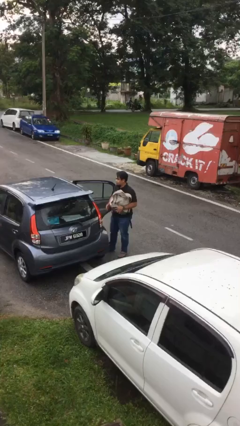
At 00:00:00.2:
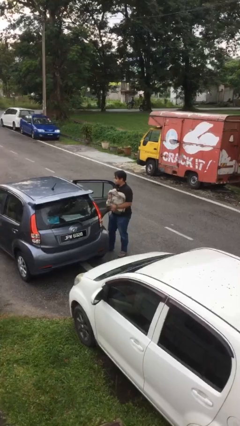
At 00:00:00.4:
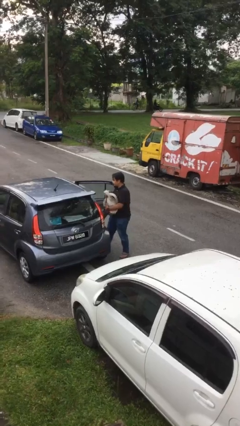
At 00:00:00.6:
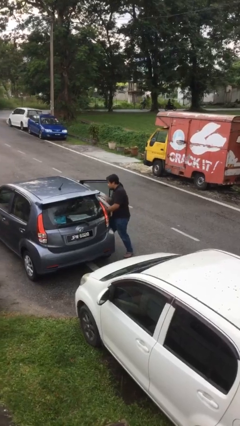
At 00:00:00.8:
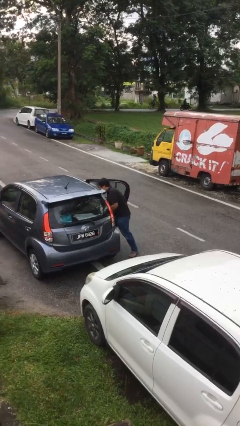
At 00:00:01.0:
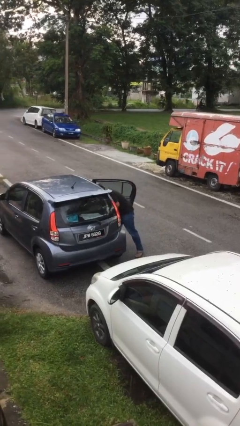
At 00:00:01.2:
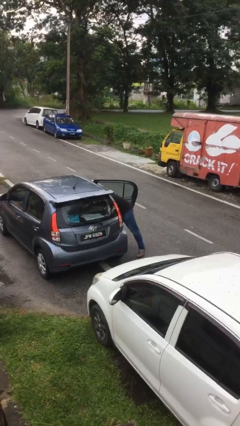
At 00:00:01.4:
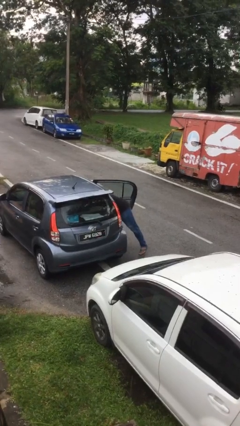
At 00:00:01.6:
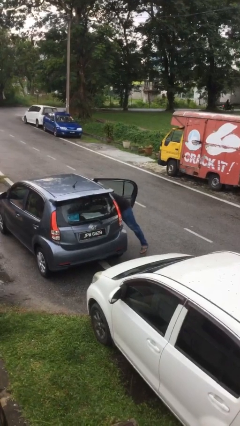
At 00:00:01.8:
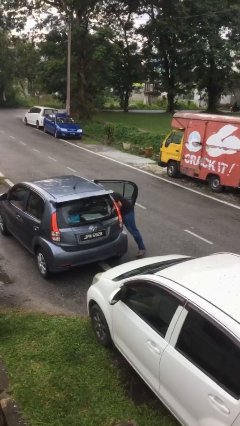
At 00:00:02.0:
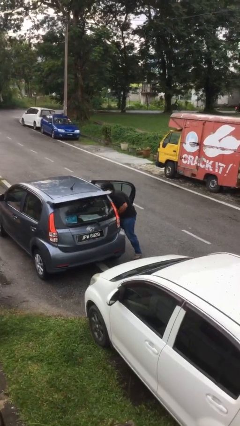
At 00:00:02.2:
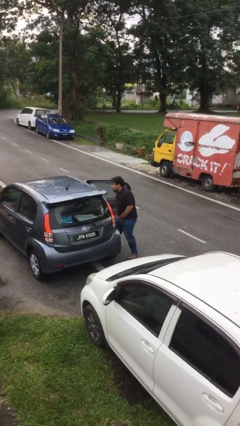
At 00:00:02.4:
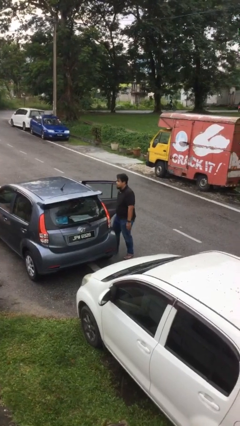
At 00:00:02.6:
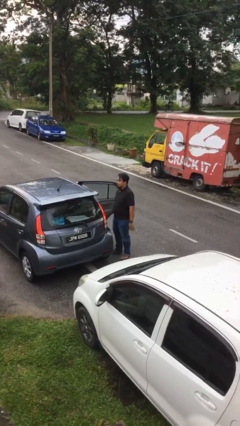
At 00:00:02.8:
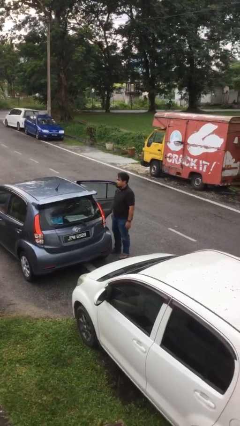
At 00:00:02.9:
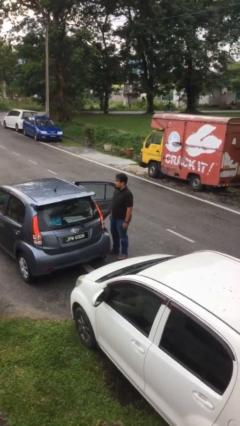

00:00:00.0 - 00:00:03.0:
person loads car

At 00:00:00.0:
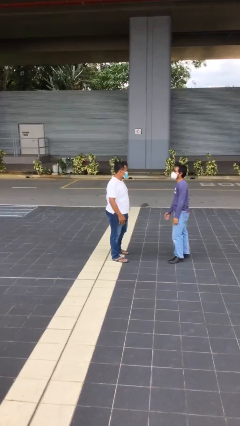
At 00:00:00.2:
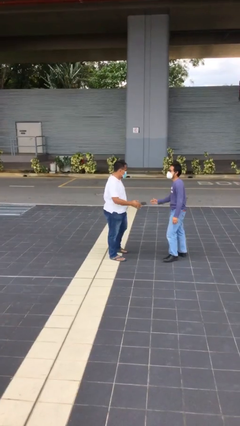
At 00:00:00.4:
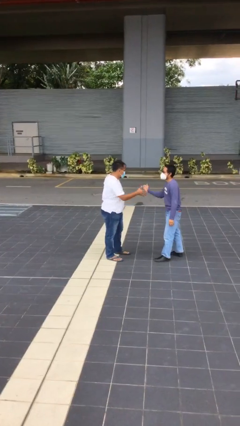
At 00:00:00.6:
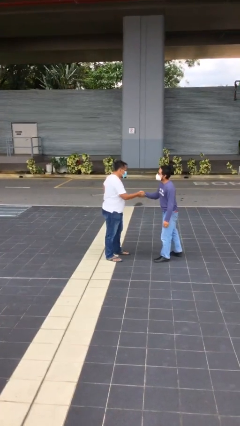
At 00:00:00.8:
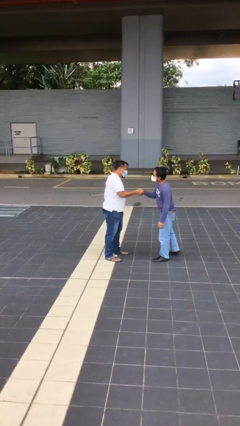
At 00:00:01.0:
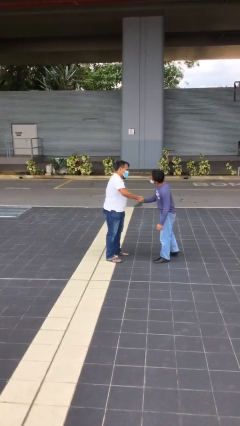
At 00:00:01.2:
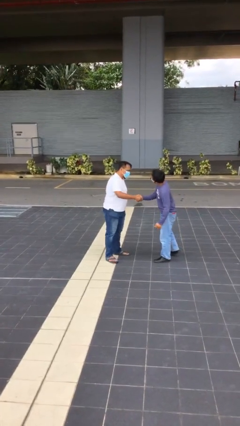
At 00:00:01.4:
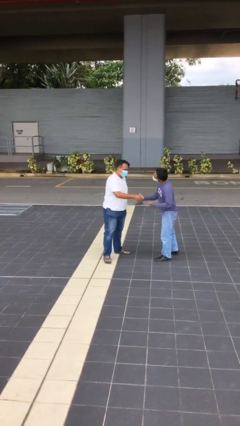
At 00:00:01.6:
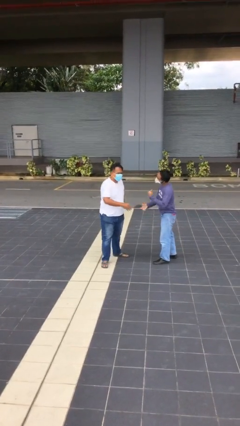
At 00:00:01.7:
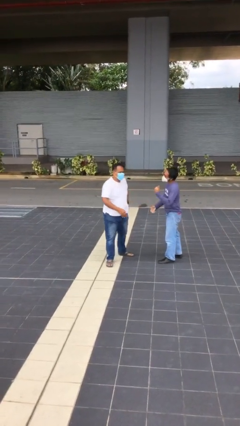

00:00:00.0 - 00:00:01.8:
person shakes hand

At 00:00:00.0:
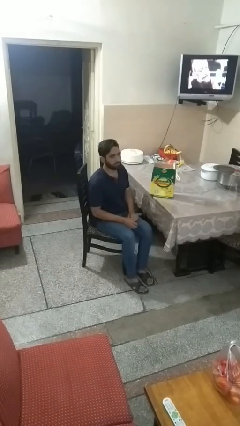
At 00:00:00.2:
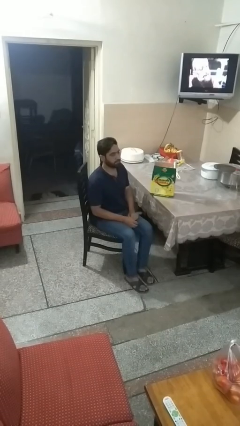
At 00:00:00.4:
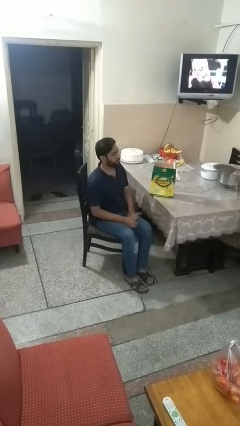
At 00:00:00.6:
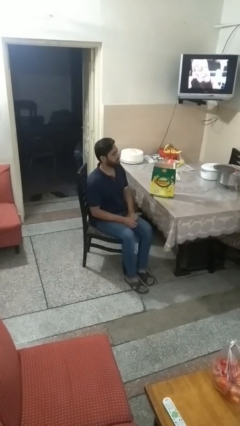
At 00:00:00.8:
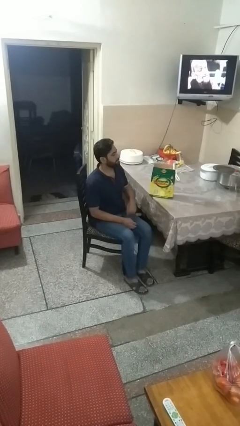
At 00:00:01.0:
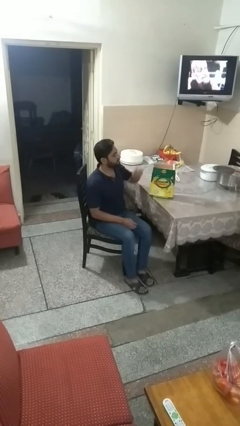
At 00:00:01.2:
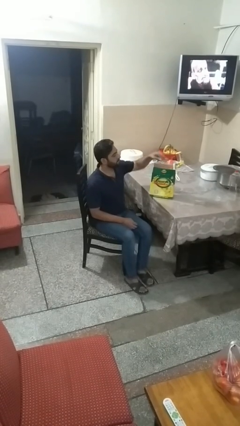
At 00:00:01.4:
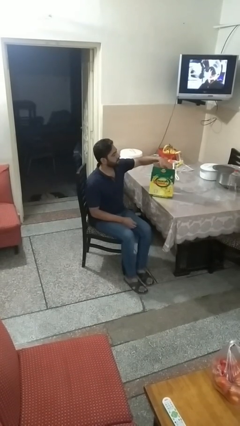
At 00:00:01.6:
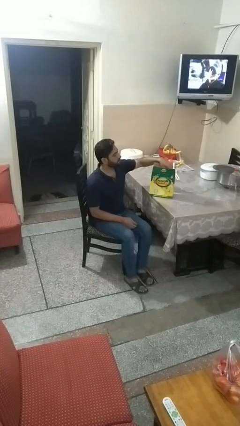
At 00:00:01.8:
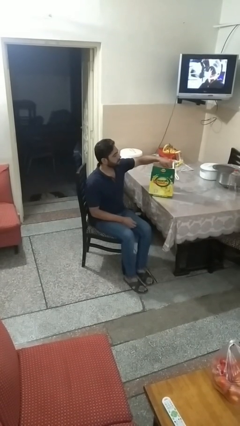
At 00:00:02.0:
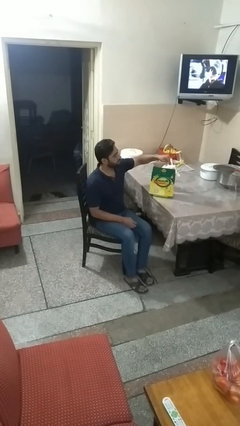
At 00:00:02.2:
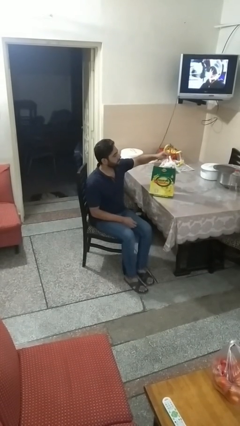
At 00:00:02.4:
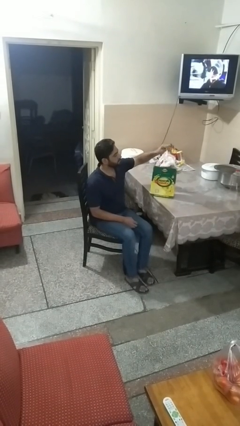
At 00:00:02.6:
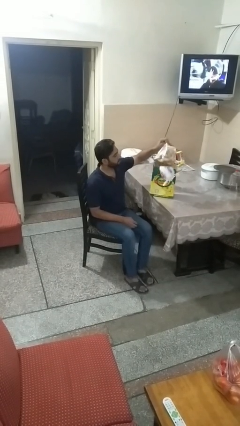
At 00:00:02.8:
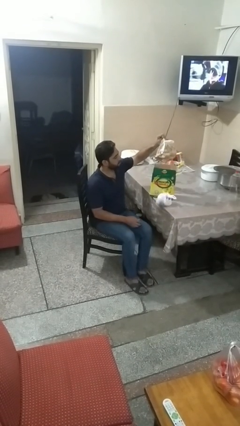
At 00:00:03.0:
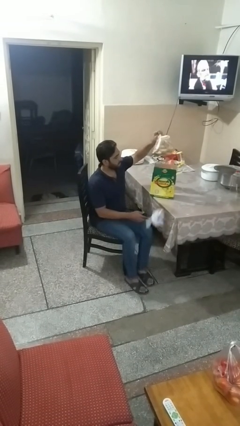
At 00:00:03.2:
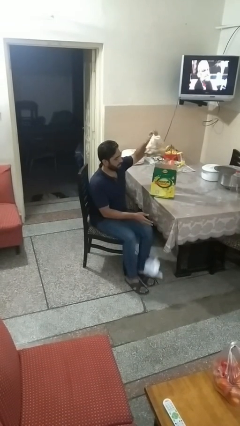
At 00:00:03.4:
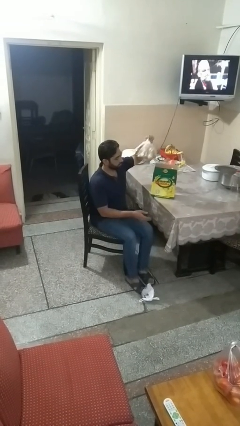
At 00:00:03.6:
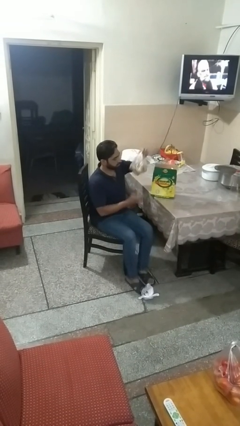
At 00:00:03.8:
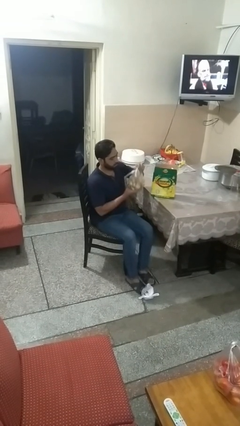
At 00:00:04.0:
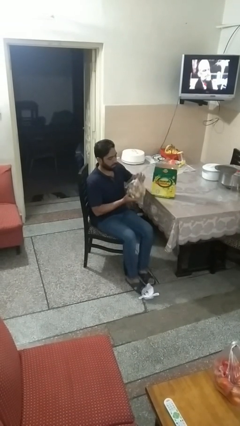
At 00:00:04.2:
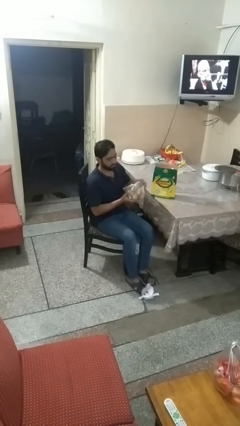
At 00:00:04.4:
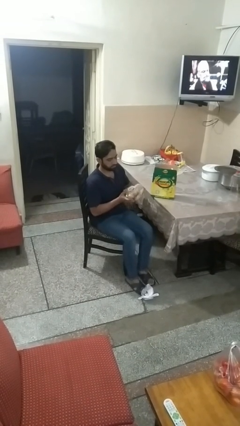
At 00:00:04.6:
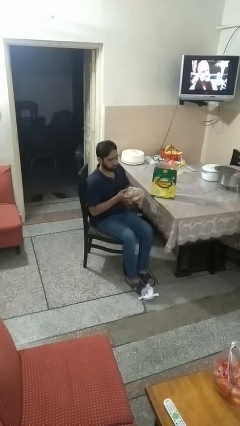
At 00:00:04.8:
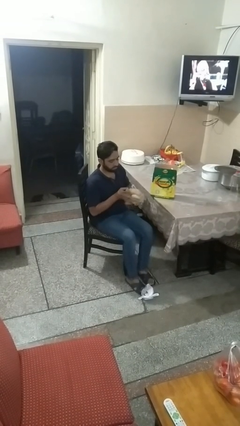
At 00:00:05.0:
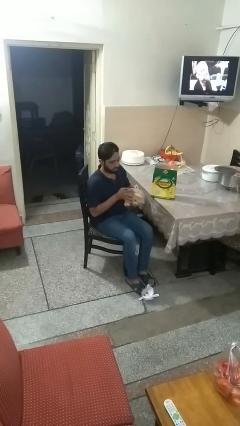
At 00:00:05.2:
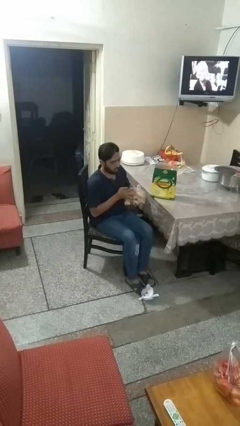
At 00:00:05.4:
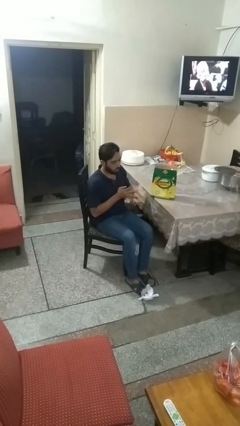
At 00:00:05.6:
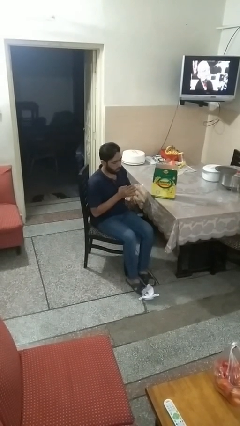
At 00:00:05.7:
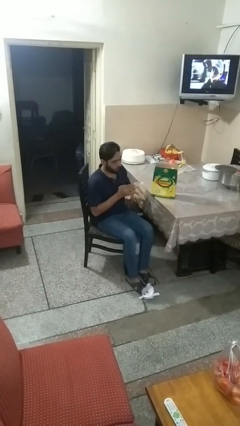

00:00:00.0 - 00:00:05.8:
person takes object from box

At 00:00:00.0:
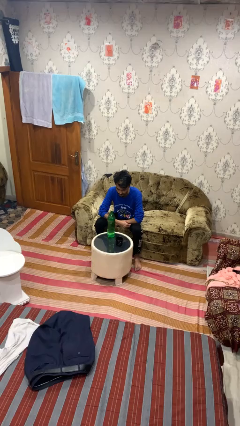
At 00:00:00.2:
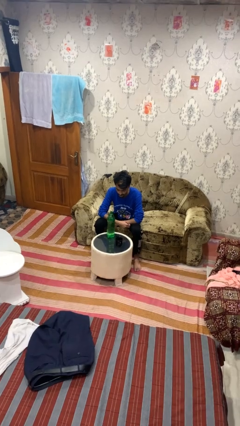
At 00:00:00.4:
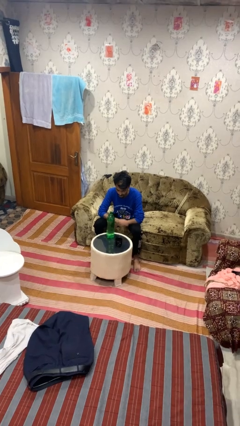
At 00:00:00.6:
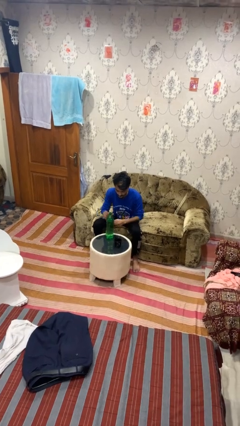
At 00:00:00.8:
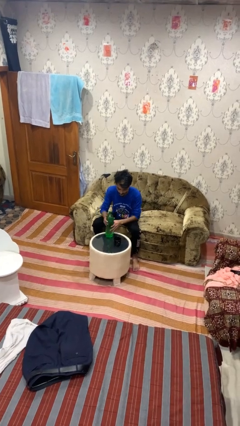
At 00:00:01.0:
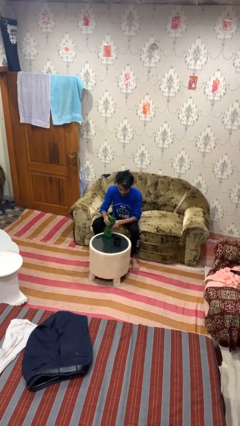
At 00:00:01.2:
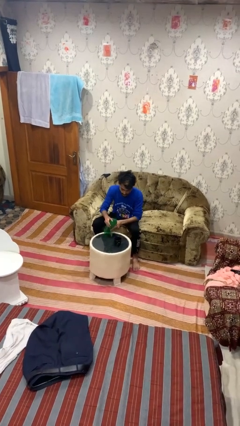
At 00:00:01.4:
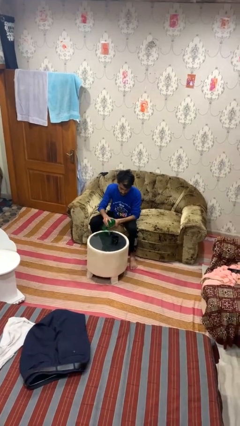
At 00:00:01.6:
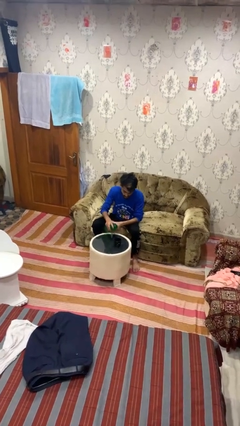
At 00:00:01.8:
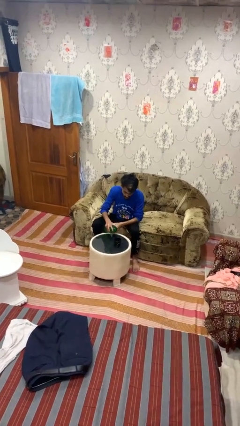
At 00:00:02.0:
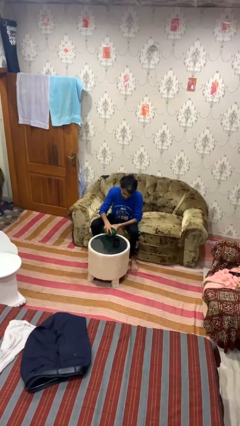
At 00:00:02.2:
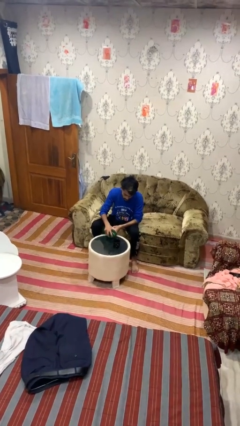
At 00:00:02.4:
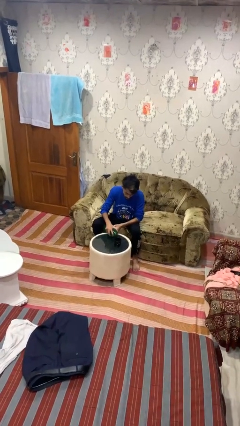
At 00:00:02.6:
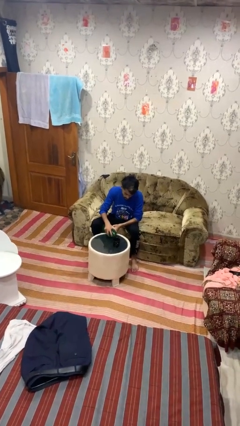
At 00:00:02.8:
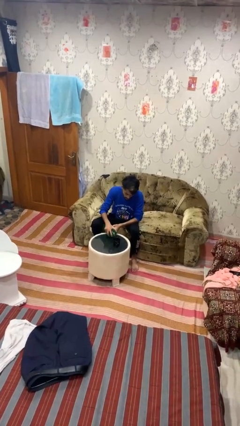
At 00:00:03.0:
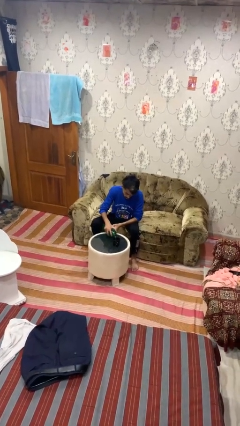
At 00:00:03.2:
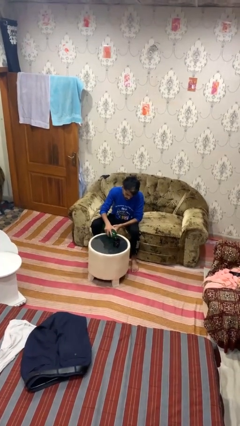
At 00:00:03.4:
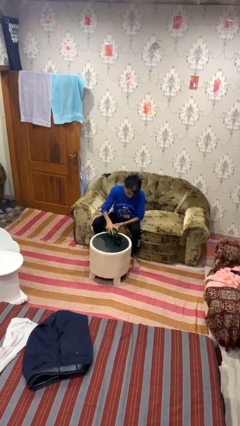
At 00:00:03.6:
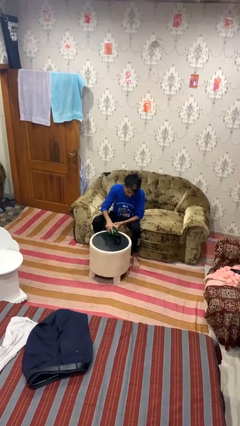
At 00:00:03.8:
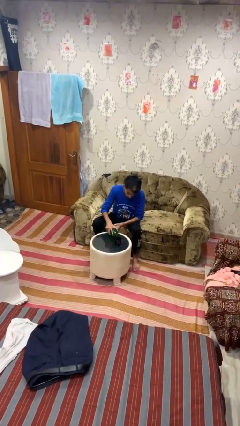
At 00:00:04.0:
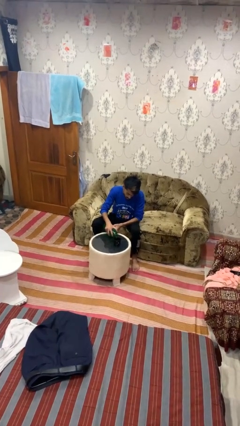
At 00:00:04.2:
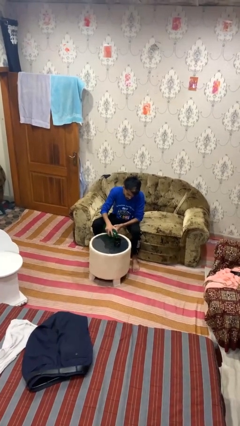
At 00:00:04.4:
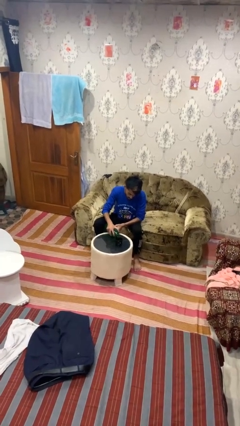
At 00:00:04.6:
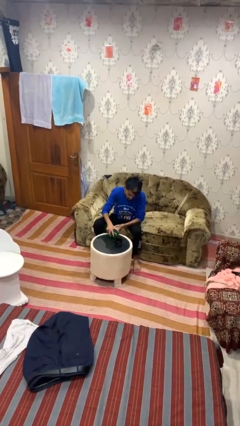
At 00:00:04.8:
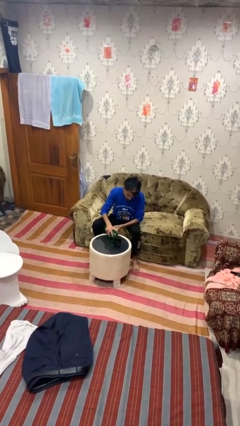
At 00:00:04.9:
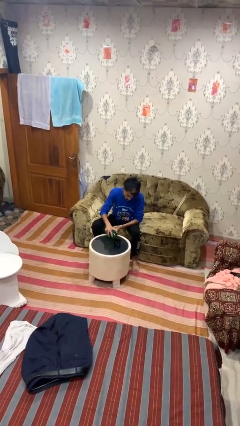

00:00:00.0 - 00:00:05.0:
person pours liquid into cup

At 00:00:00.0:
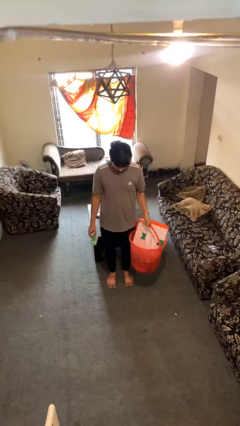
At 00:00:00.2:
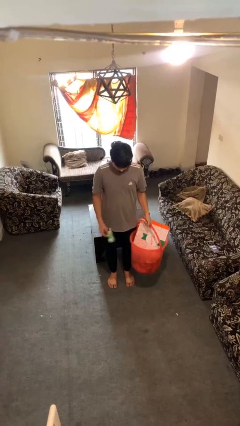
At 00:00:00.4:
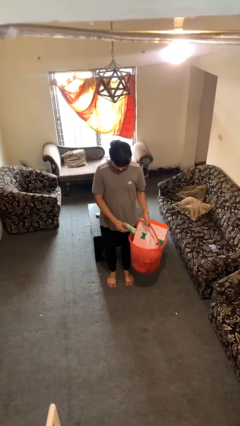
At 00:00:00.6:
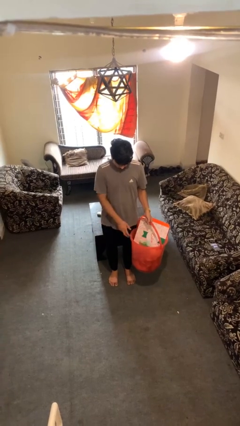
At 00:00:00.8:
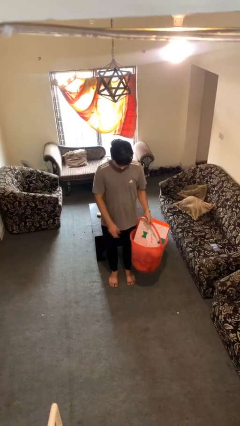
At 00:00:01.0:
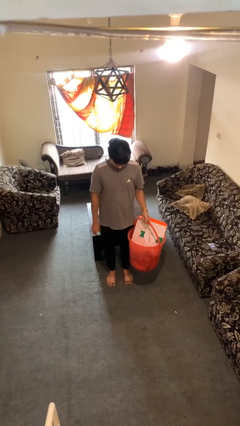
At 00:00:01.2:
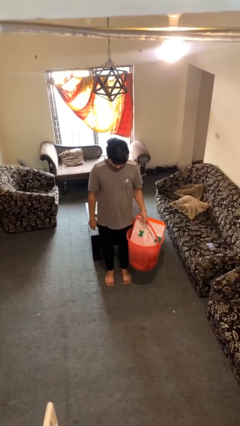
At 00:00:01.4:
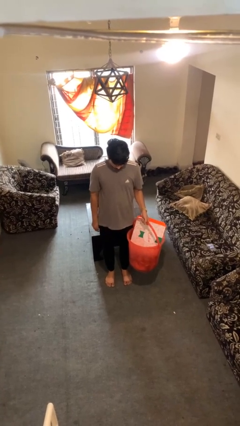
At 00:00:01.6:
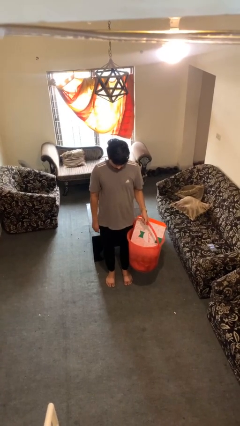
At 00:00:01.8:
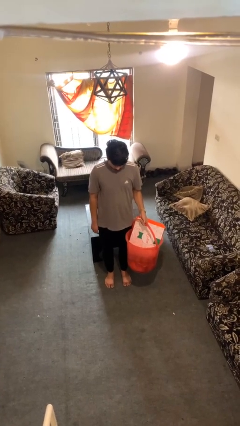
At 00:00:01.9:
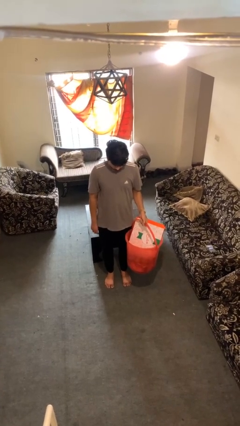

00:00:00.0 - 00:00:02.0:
person puts object into basket
